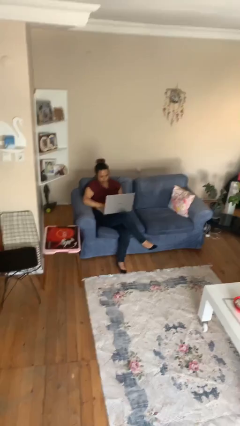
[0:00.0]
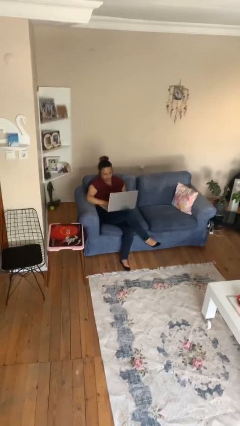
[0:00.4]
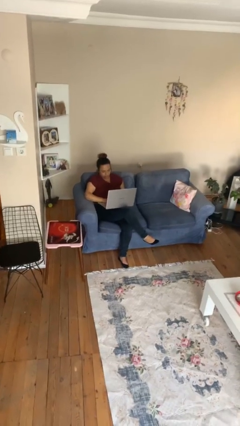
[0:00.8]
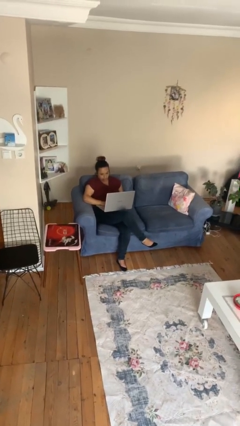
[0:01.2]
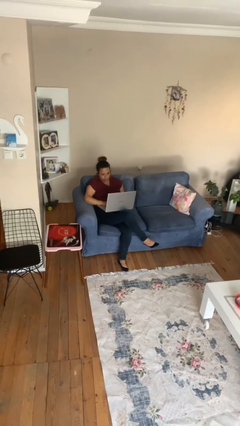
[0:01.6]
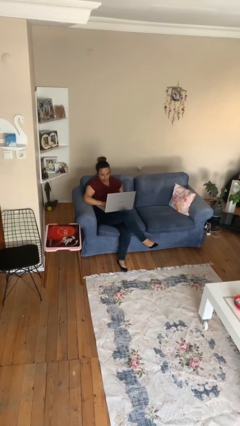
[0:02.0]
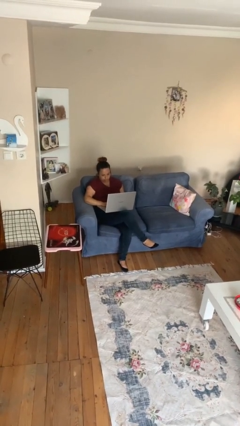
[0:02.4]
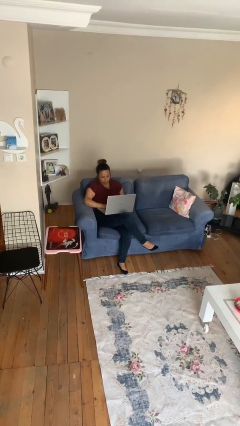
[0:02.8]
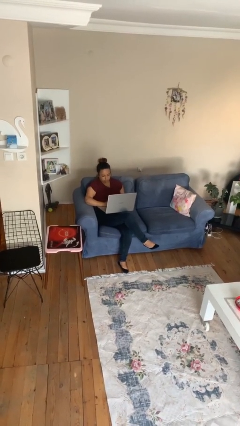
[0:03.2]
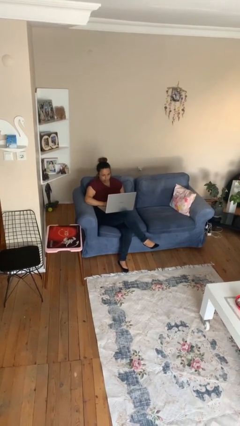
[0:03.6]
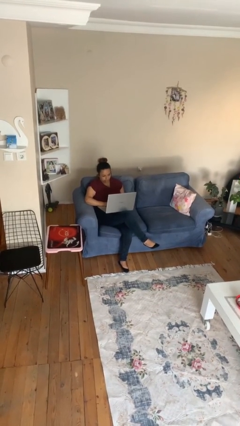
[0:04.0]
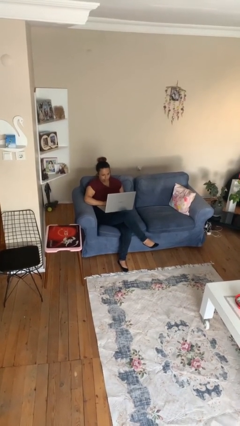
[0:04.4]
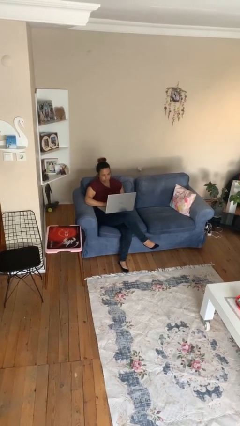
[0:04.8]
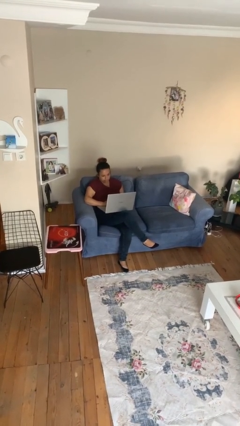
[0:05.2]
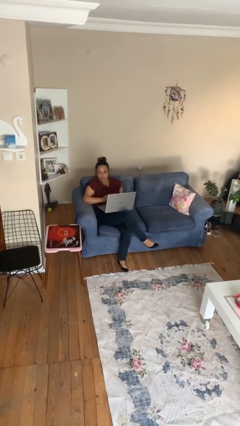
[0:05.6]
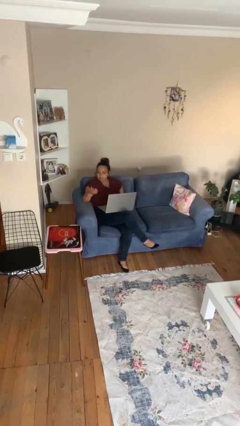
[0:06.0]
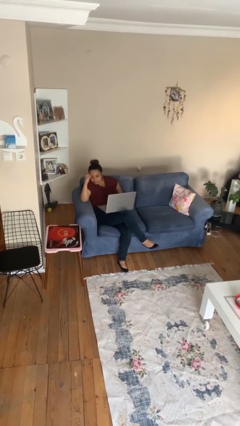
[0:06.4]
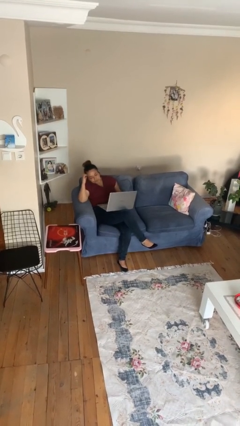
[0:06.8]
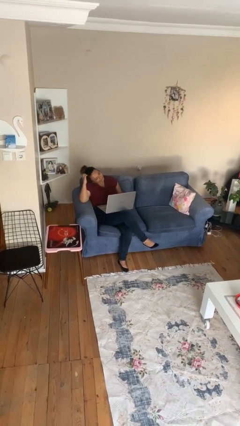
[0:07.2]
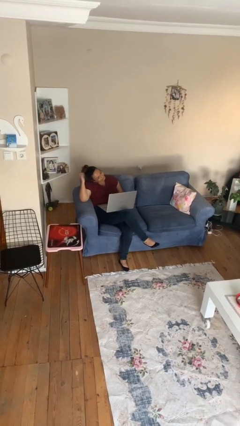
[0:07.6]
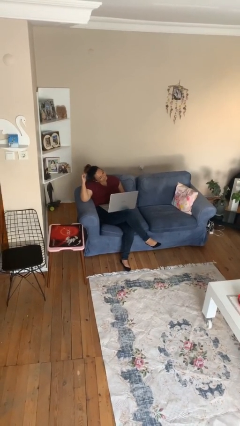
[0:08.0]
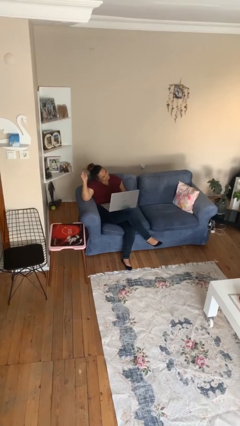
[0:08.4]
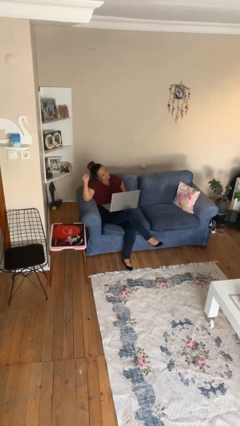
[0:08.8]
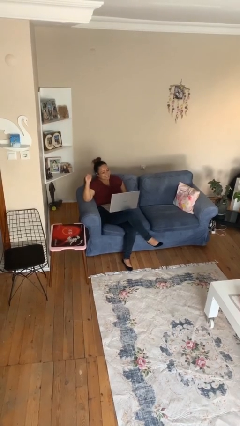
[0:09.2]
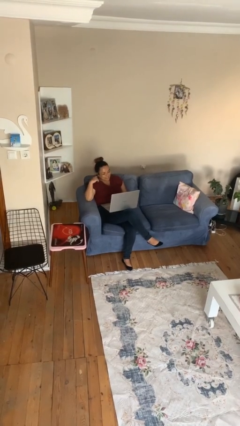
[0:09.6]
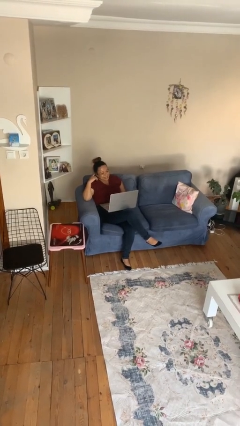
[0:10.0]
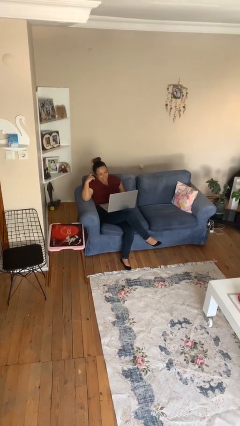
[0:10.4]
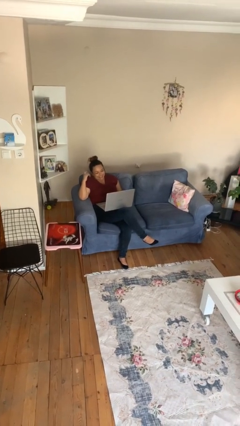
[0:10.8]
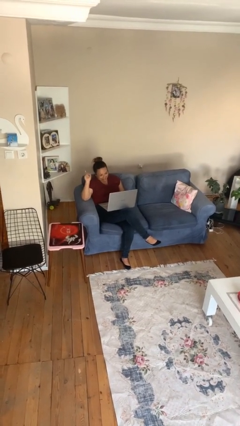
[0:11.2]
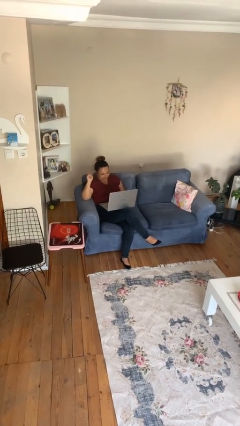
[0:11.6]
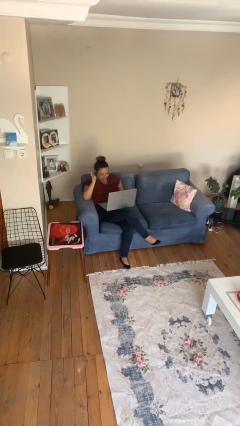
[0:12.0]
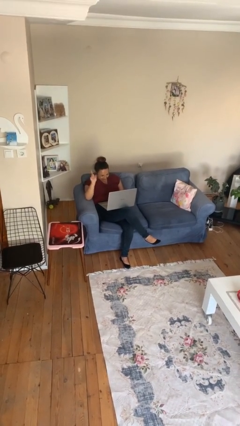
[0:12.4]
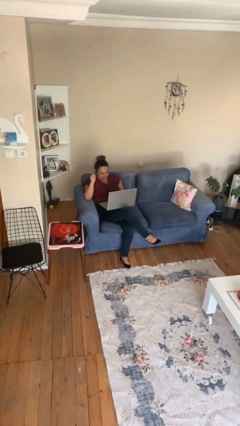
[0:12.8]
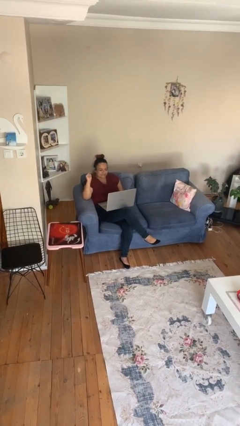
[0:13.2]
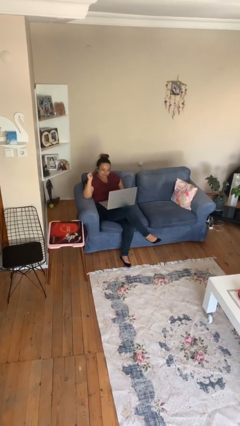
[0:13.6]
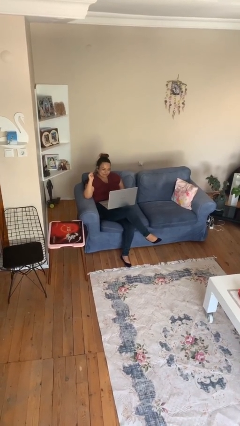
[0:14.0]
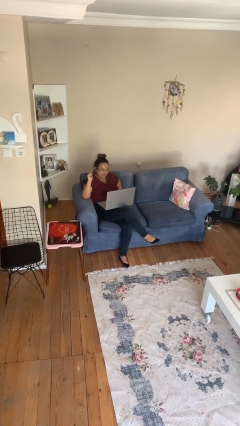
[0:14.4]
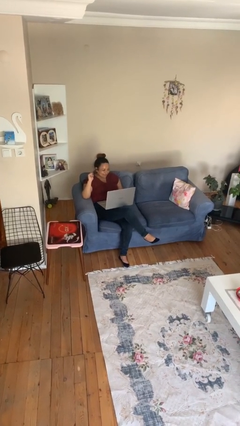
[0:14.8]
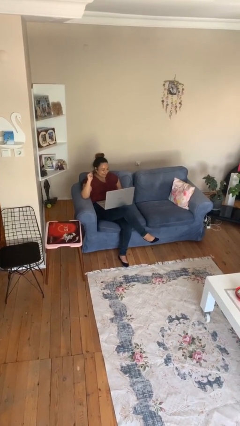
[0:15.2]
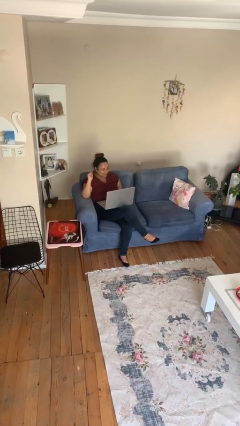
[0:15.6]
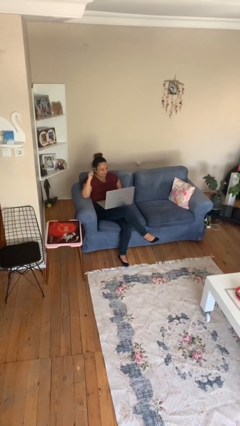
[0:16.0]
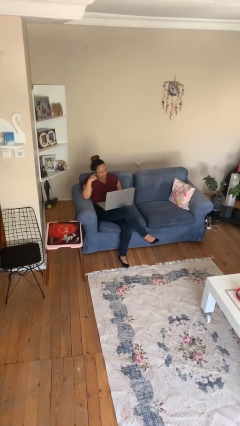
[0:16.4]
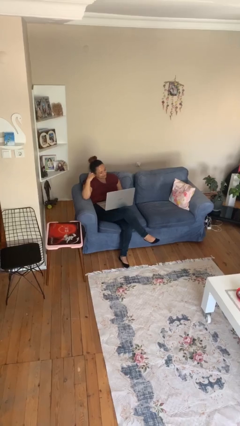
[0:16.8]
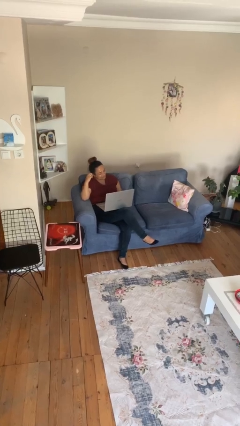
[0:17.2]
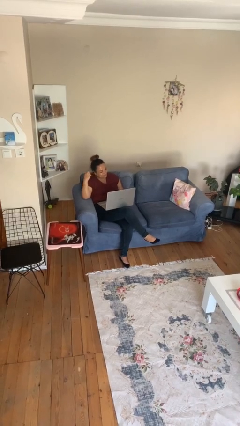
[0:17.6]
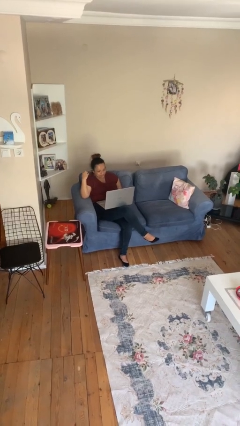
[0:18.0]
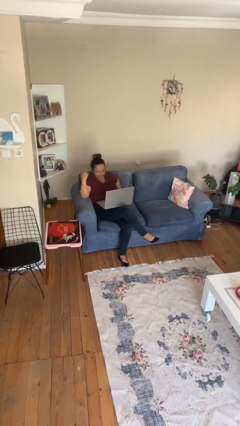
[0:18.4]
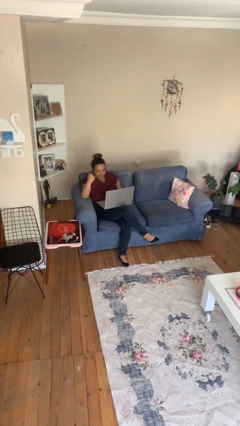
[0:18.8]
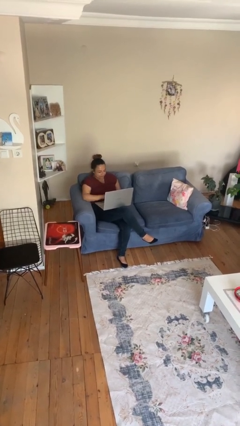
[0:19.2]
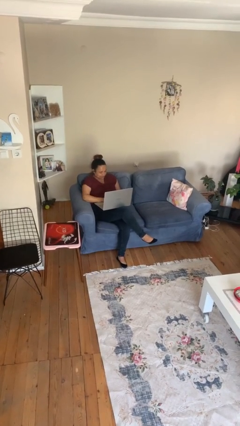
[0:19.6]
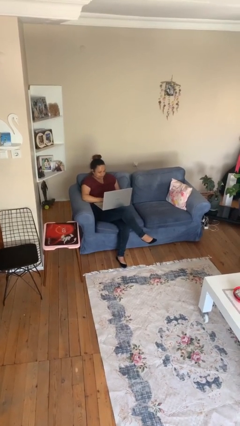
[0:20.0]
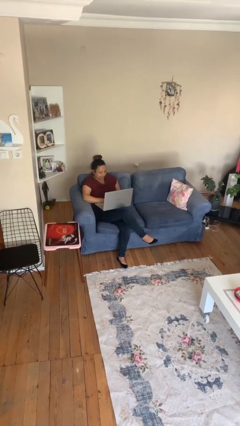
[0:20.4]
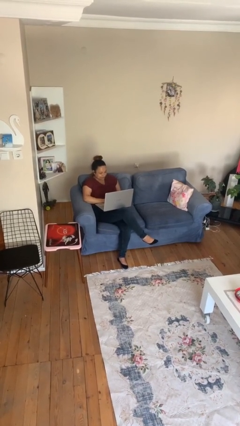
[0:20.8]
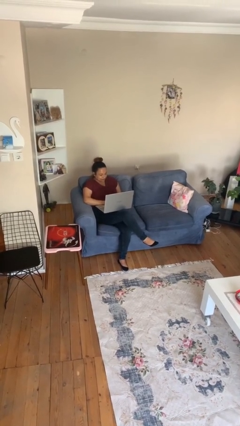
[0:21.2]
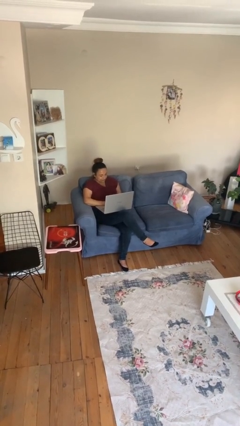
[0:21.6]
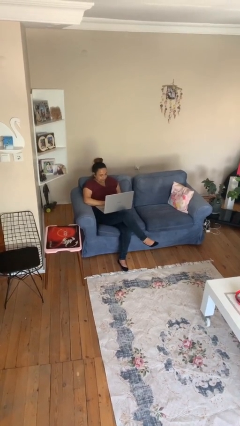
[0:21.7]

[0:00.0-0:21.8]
person interacts with laptop

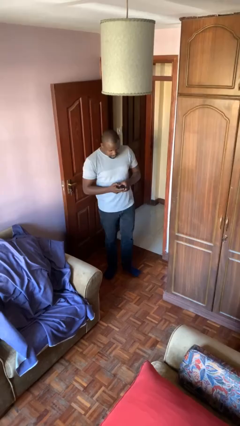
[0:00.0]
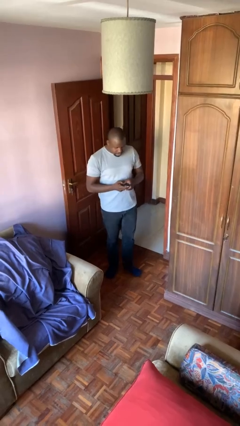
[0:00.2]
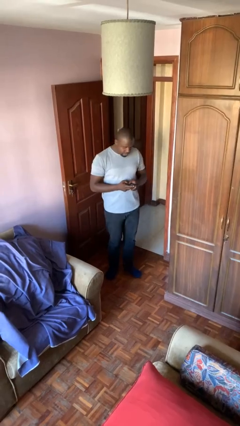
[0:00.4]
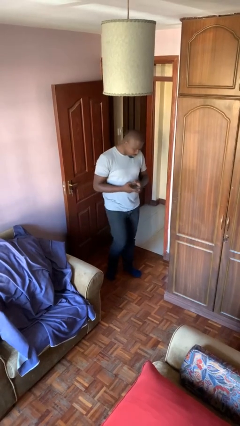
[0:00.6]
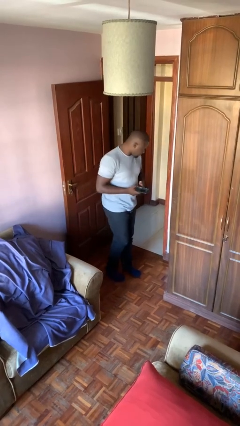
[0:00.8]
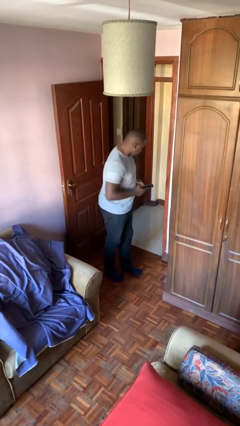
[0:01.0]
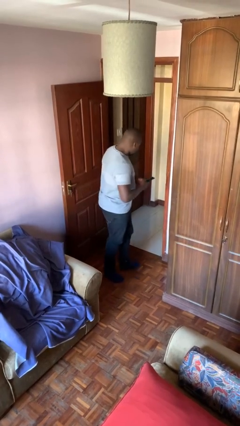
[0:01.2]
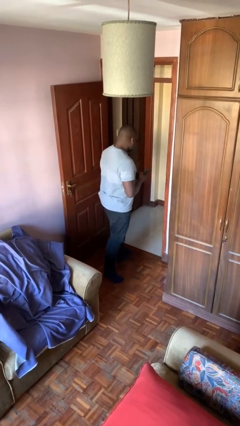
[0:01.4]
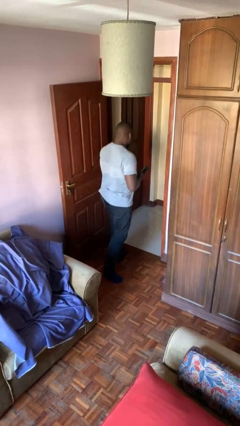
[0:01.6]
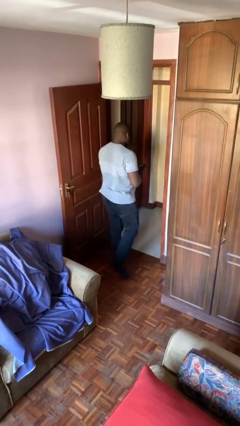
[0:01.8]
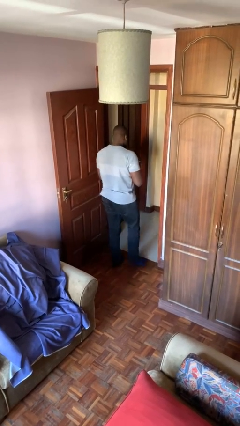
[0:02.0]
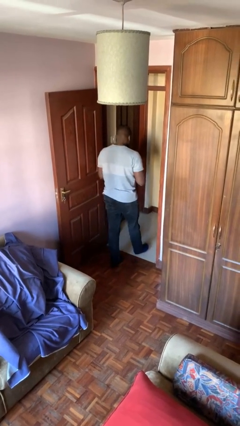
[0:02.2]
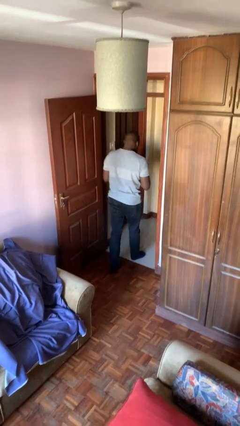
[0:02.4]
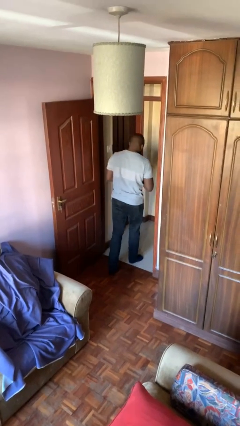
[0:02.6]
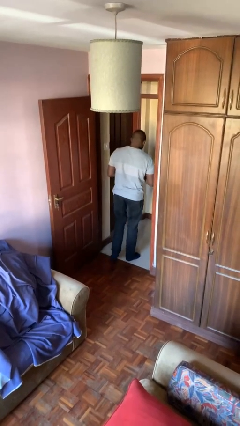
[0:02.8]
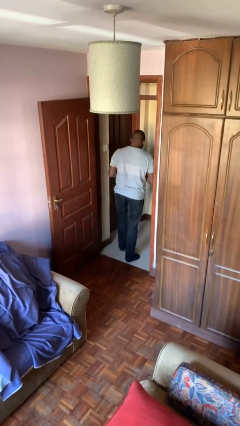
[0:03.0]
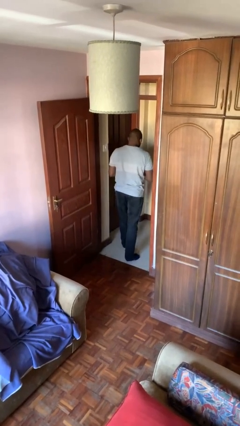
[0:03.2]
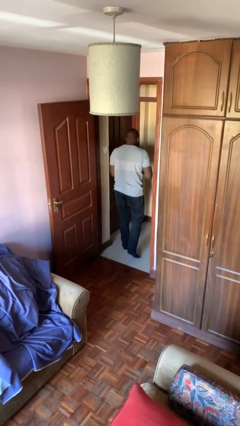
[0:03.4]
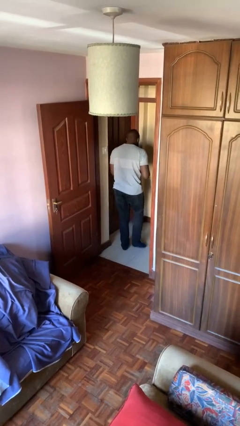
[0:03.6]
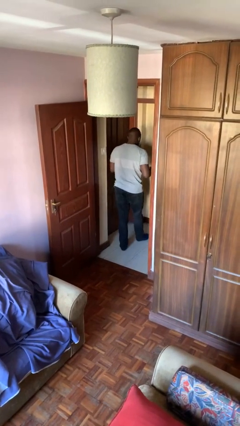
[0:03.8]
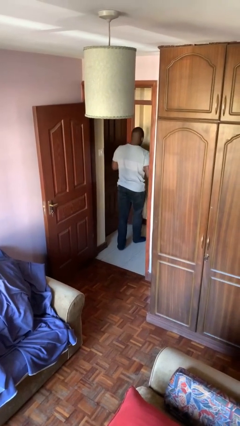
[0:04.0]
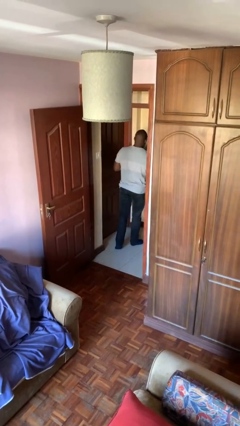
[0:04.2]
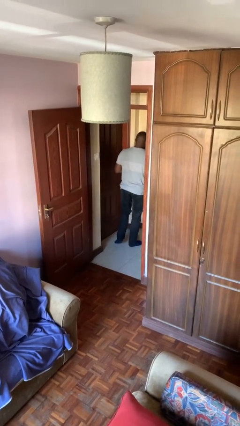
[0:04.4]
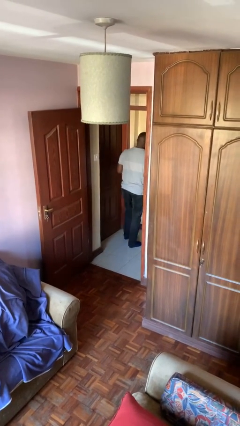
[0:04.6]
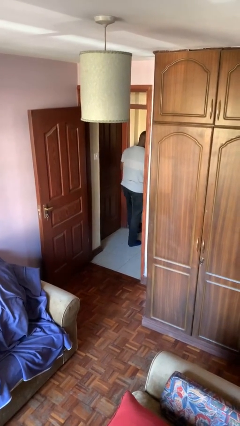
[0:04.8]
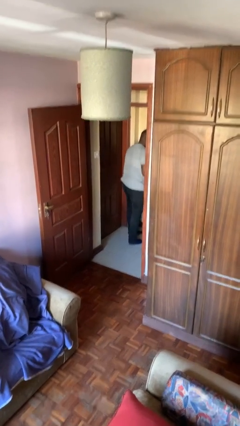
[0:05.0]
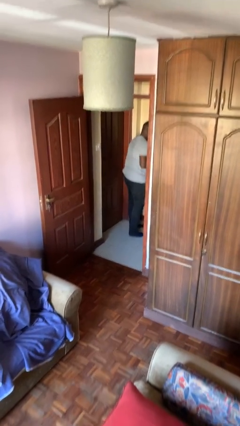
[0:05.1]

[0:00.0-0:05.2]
person exits scene through structure

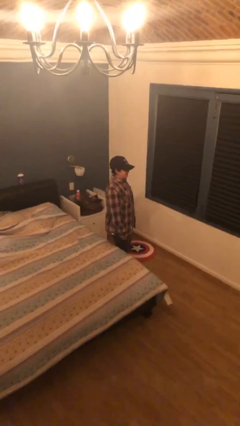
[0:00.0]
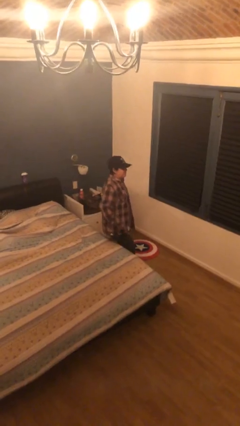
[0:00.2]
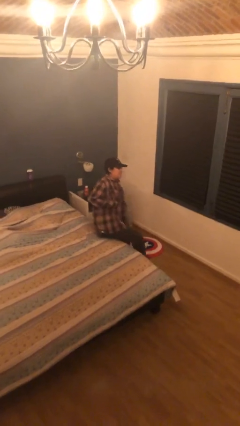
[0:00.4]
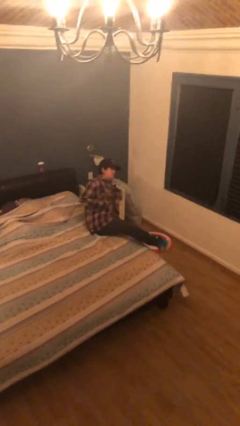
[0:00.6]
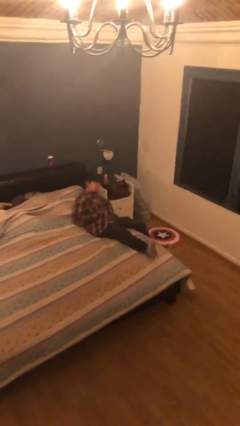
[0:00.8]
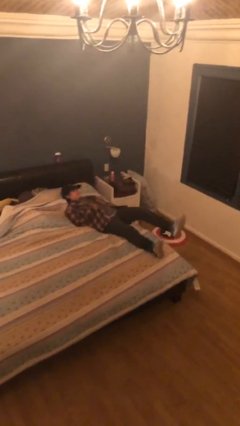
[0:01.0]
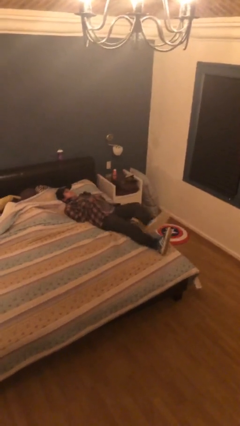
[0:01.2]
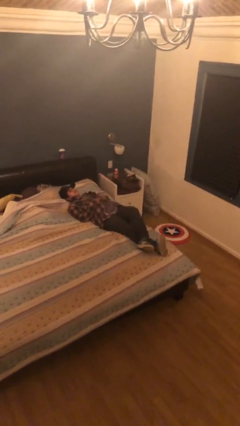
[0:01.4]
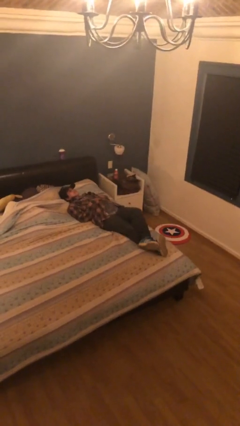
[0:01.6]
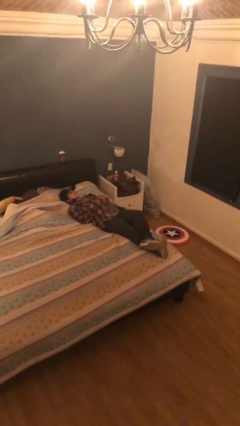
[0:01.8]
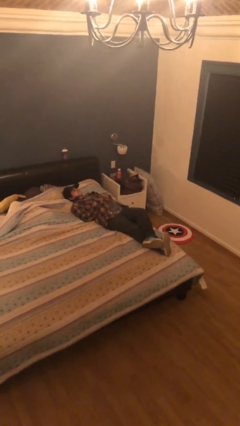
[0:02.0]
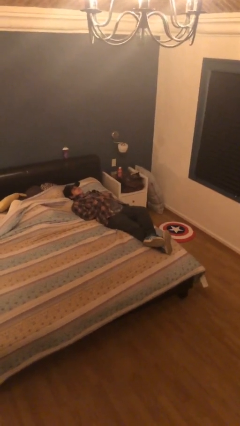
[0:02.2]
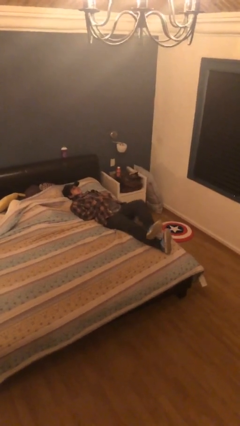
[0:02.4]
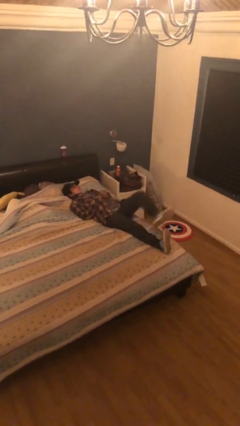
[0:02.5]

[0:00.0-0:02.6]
person lies down on bed
